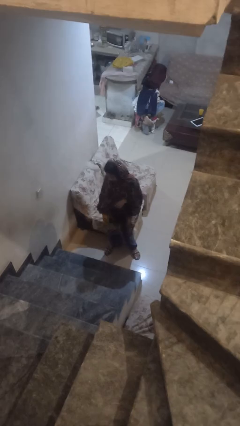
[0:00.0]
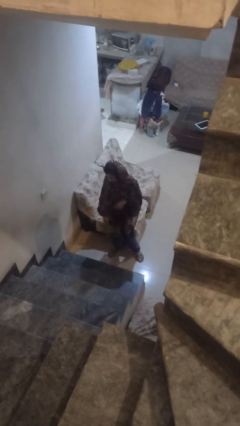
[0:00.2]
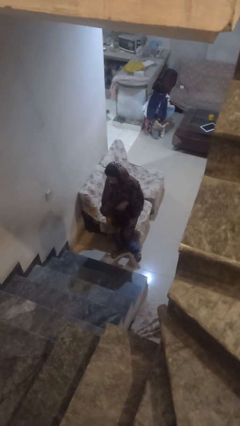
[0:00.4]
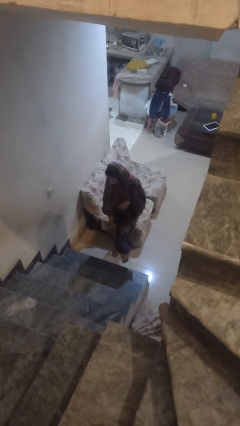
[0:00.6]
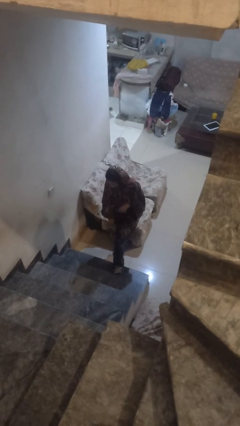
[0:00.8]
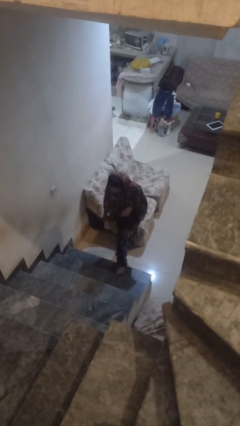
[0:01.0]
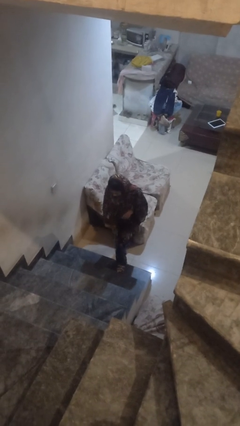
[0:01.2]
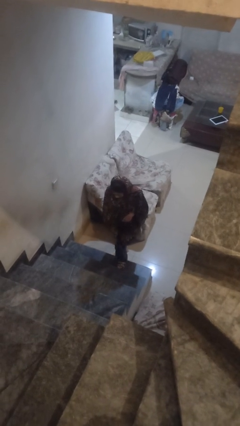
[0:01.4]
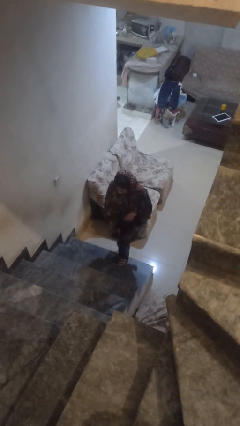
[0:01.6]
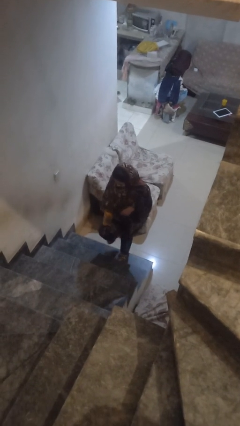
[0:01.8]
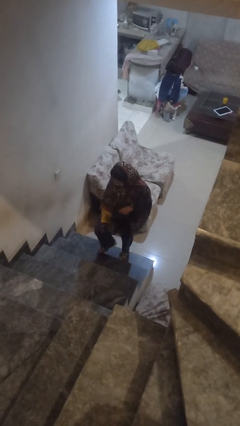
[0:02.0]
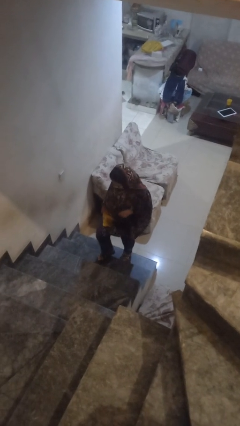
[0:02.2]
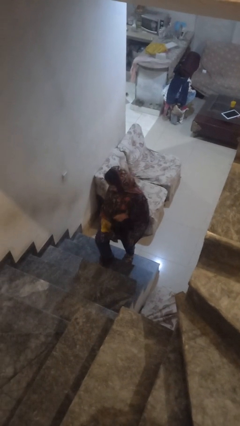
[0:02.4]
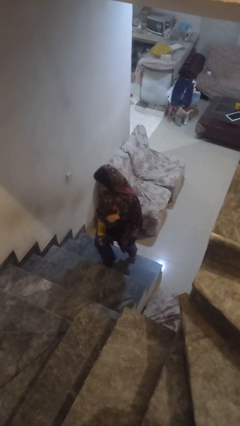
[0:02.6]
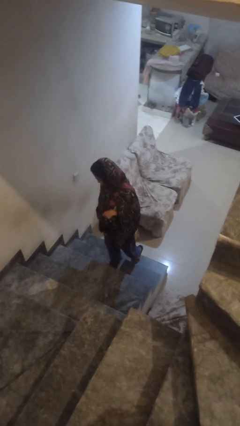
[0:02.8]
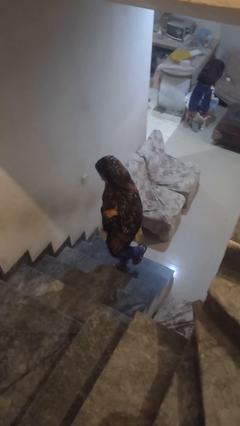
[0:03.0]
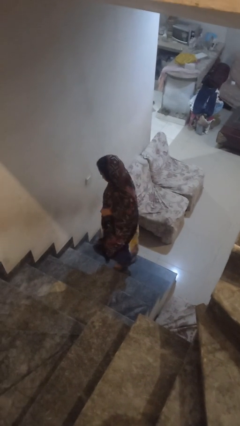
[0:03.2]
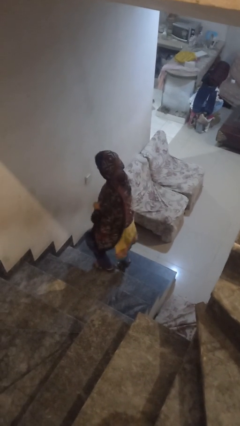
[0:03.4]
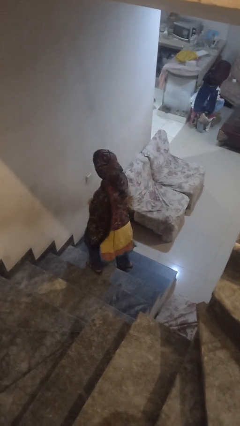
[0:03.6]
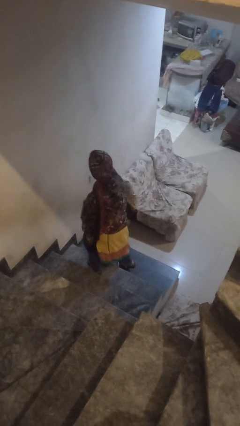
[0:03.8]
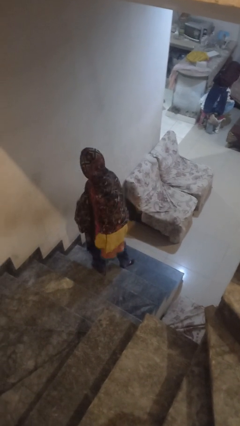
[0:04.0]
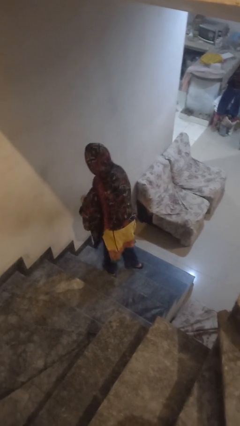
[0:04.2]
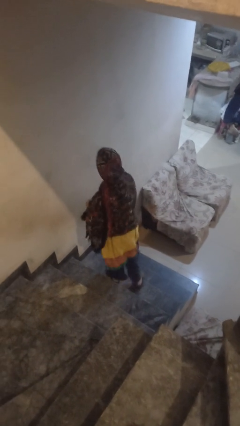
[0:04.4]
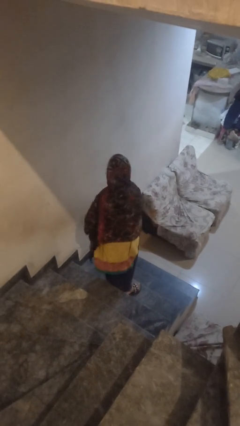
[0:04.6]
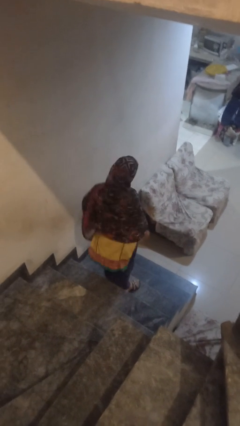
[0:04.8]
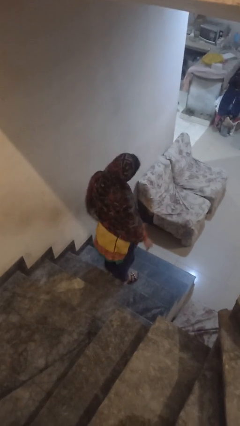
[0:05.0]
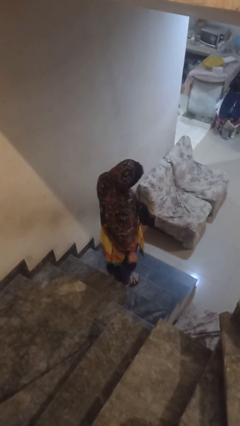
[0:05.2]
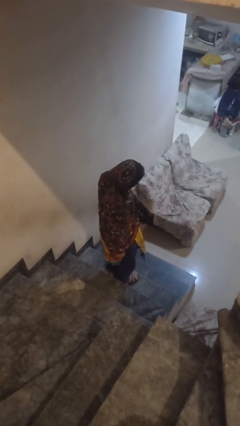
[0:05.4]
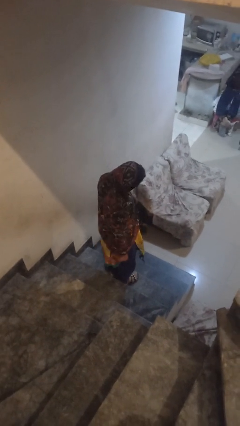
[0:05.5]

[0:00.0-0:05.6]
person climbs up stairs

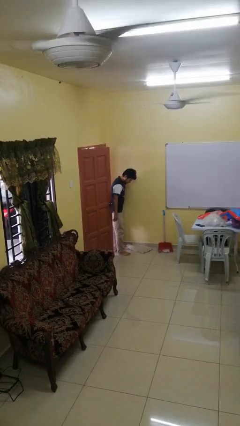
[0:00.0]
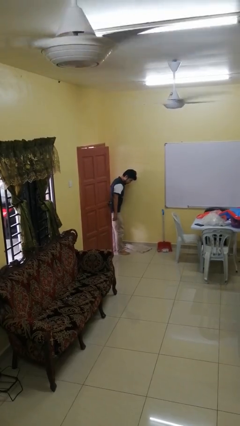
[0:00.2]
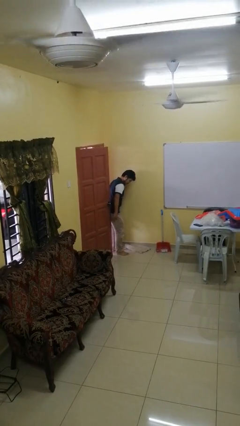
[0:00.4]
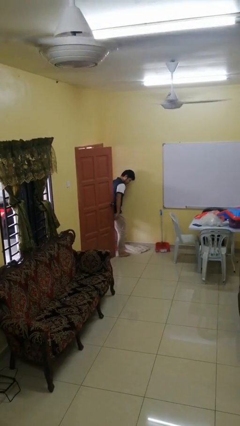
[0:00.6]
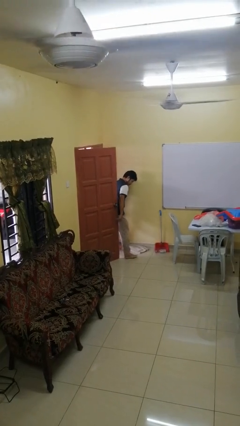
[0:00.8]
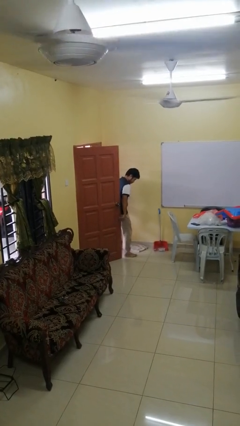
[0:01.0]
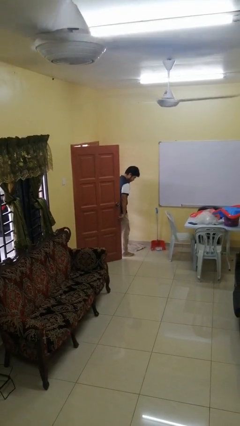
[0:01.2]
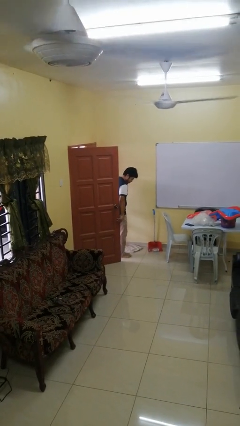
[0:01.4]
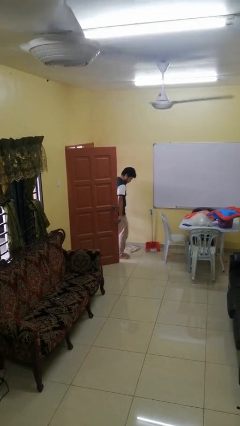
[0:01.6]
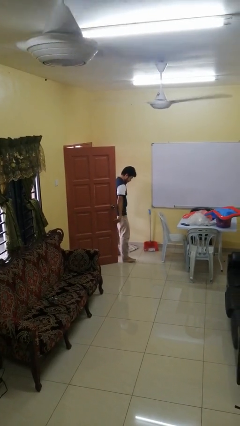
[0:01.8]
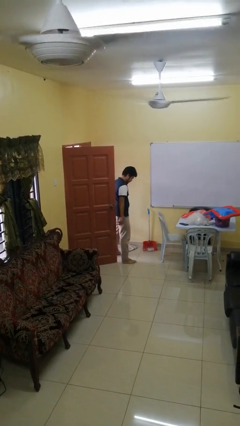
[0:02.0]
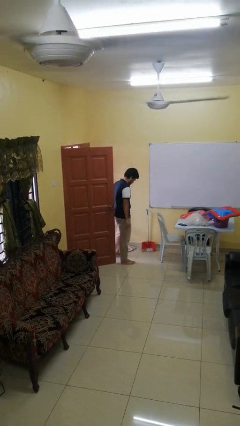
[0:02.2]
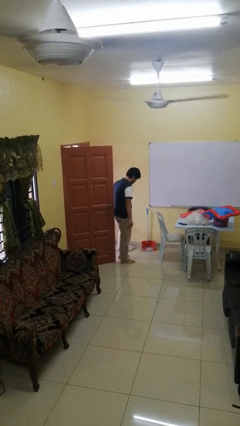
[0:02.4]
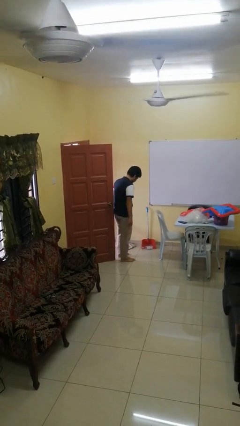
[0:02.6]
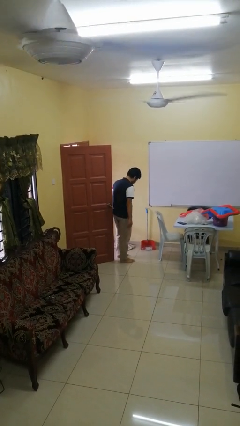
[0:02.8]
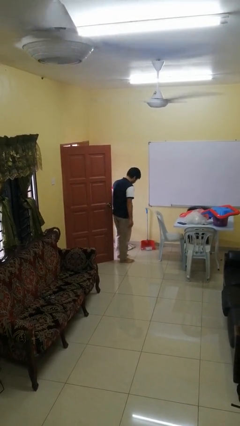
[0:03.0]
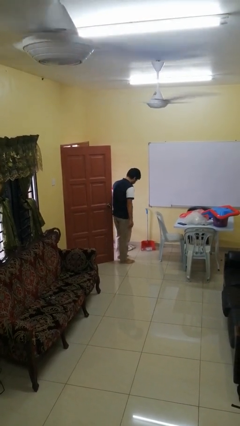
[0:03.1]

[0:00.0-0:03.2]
person opens facility door

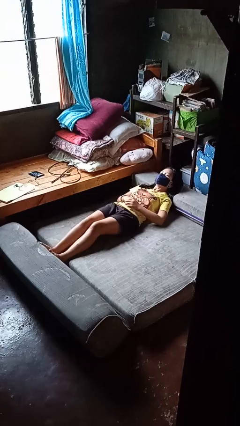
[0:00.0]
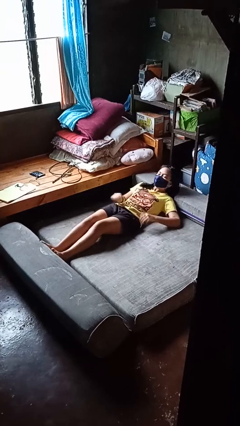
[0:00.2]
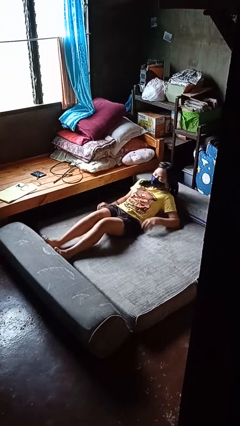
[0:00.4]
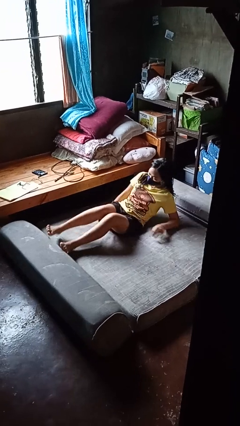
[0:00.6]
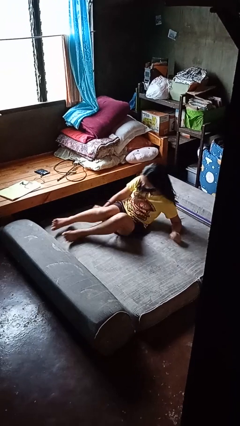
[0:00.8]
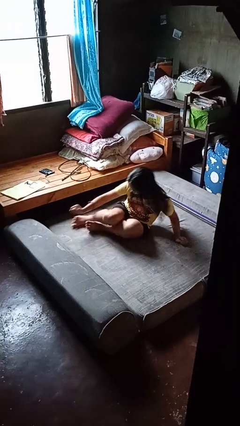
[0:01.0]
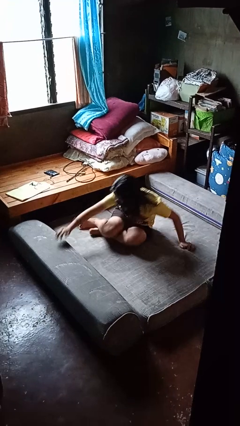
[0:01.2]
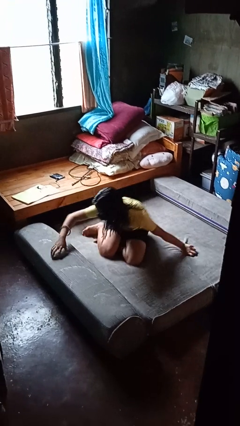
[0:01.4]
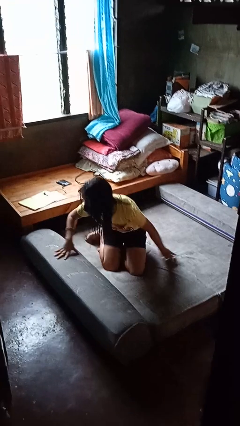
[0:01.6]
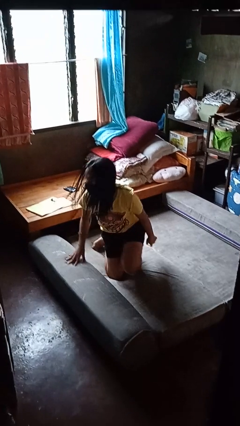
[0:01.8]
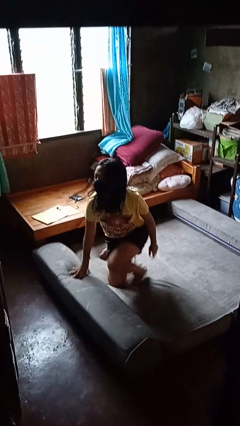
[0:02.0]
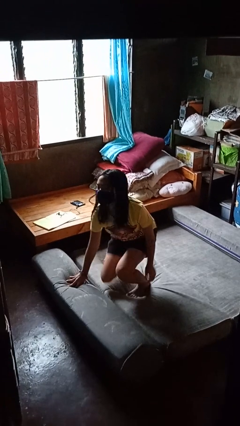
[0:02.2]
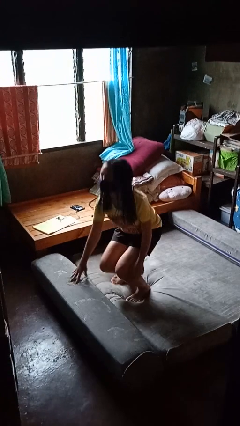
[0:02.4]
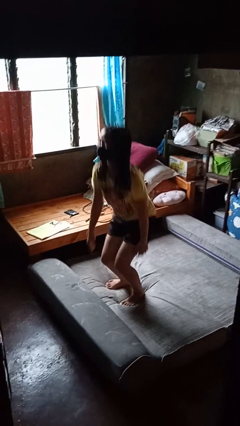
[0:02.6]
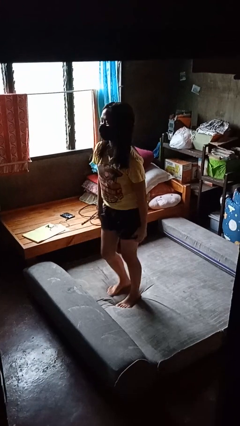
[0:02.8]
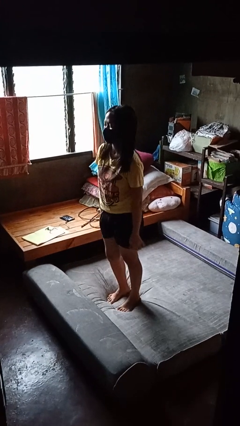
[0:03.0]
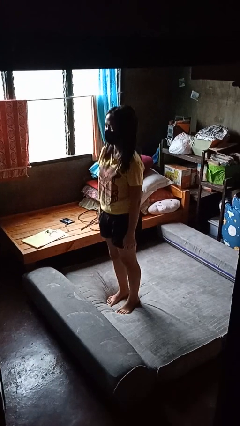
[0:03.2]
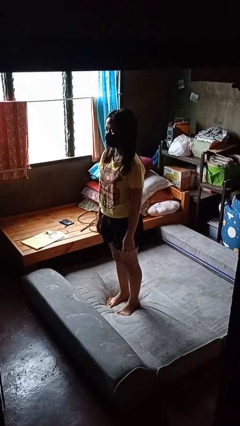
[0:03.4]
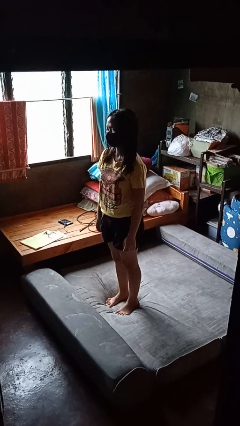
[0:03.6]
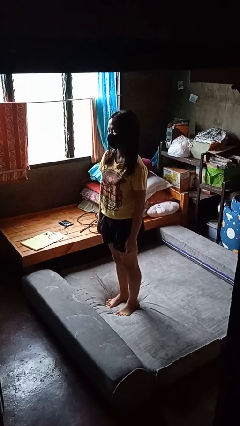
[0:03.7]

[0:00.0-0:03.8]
person stands up

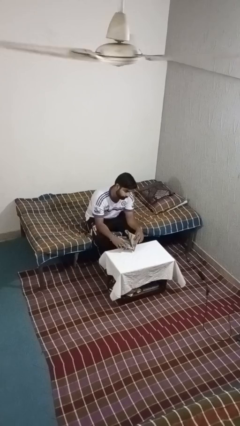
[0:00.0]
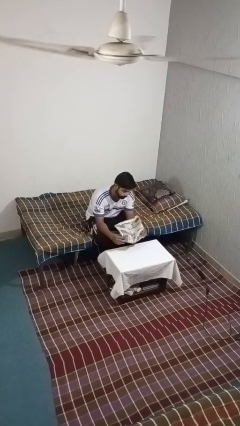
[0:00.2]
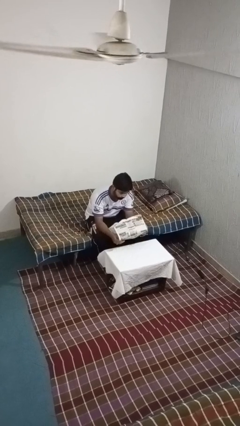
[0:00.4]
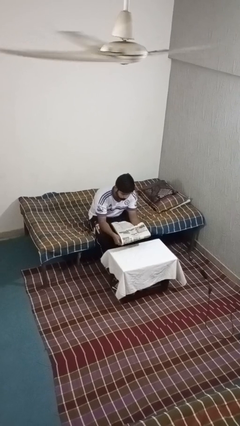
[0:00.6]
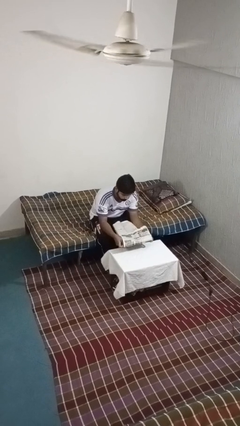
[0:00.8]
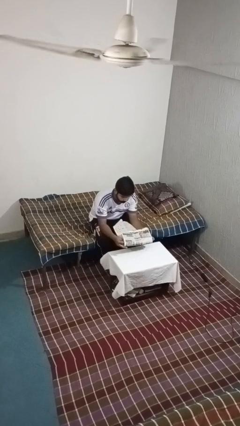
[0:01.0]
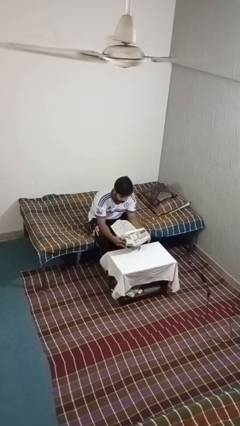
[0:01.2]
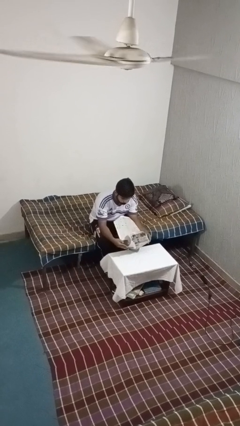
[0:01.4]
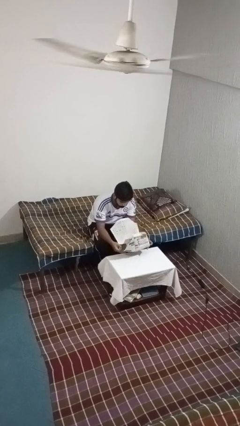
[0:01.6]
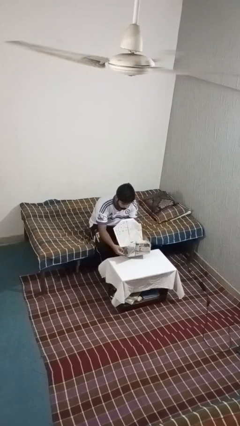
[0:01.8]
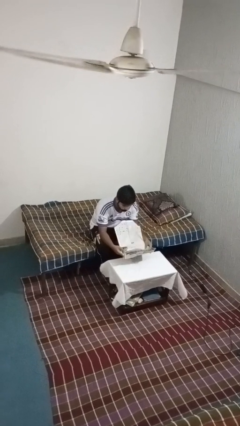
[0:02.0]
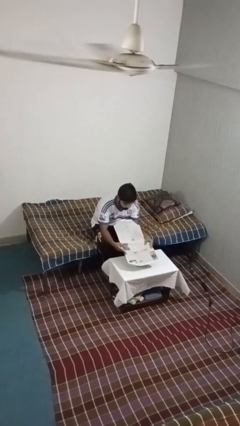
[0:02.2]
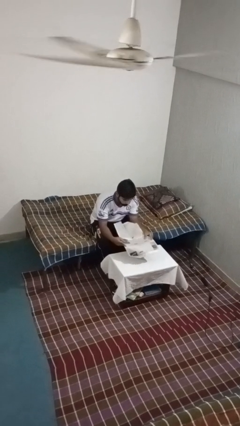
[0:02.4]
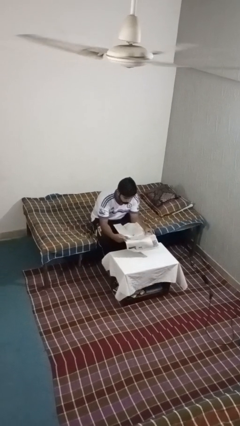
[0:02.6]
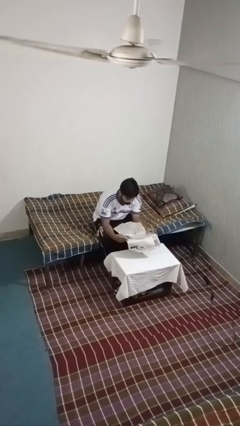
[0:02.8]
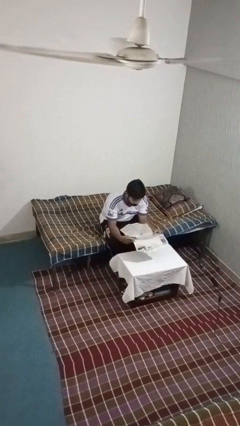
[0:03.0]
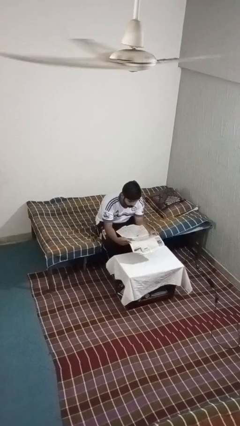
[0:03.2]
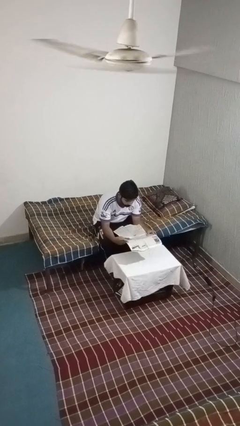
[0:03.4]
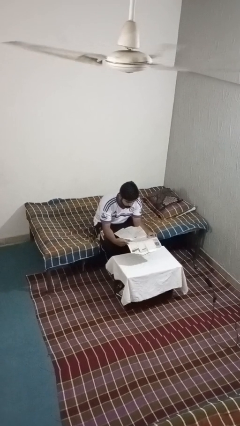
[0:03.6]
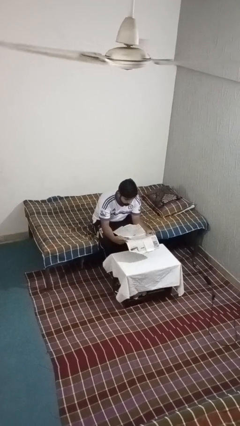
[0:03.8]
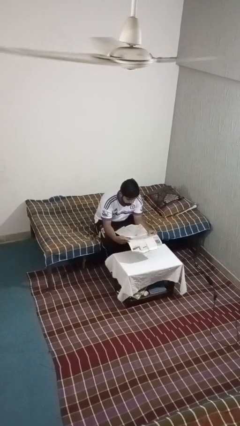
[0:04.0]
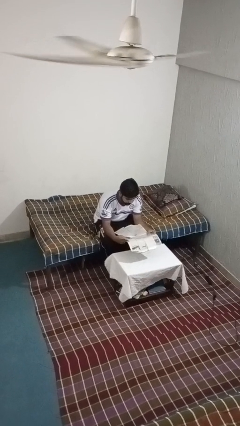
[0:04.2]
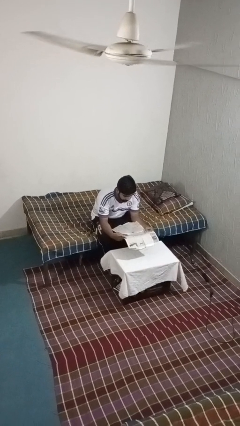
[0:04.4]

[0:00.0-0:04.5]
person reads newspaper

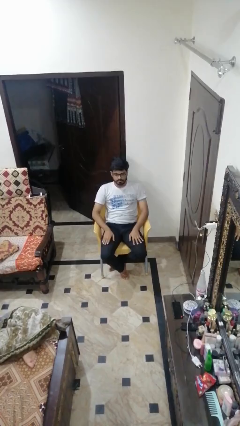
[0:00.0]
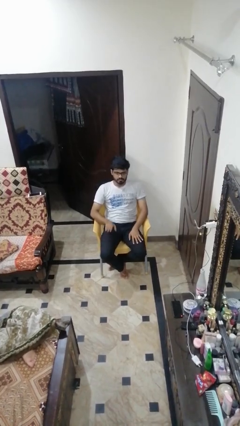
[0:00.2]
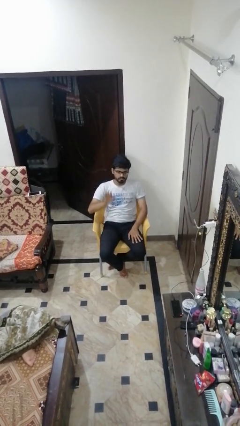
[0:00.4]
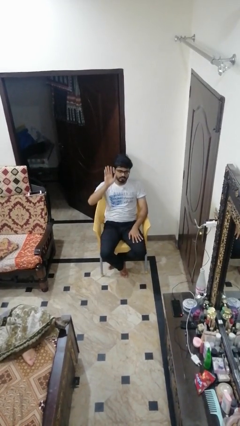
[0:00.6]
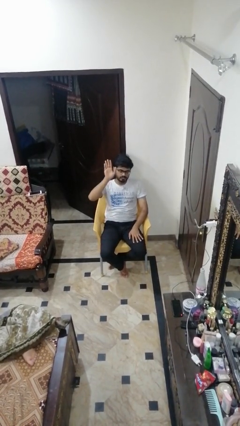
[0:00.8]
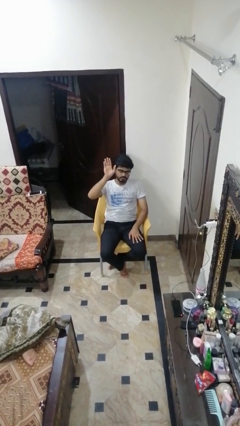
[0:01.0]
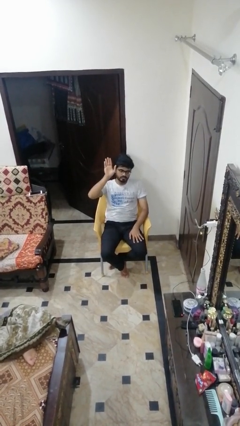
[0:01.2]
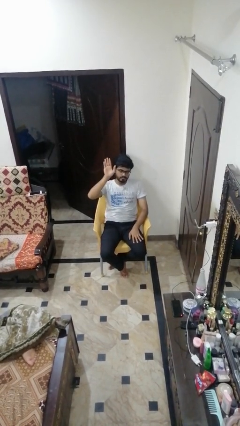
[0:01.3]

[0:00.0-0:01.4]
person gestures raise hand
